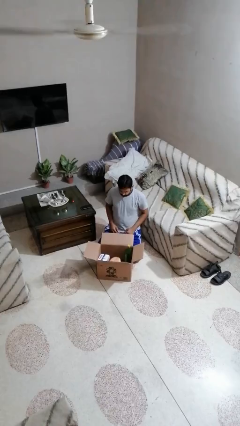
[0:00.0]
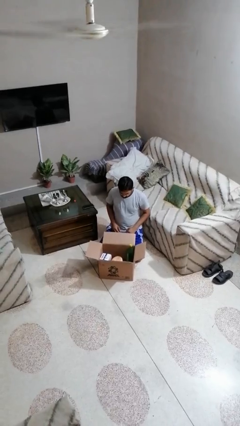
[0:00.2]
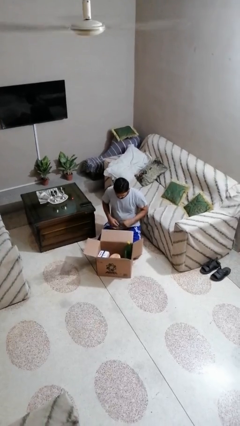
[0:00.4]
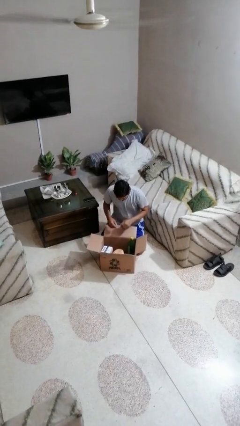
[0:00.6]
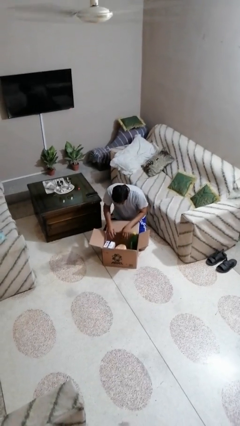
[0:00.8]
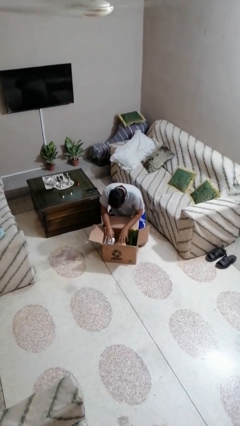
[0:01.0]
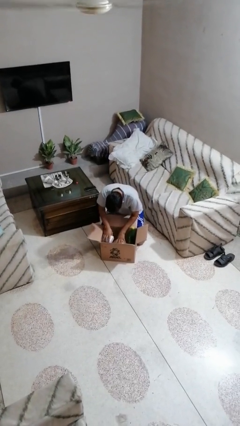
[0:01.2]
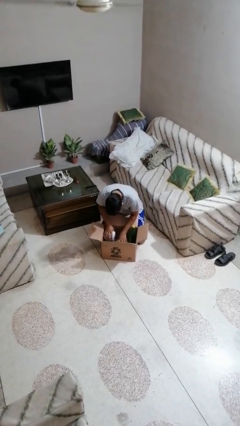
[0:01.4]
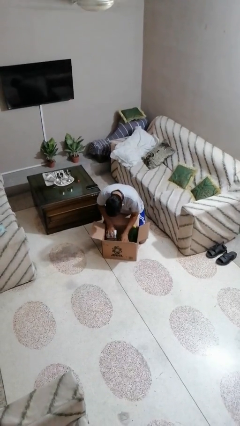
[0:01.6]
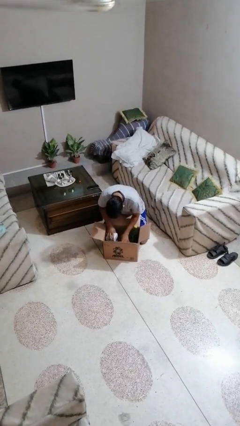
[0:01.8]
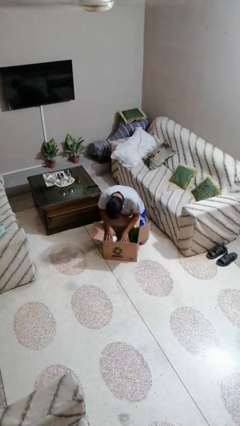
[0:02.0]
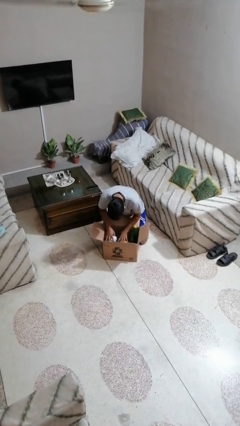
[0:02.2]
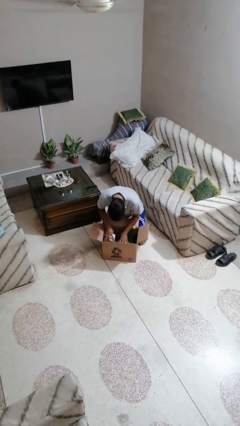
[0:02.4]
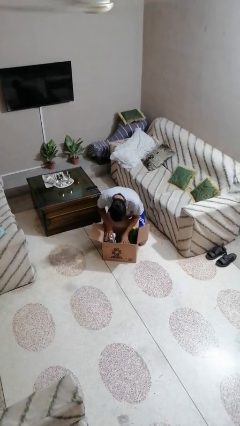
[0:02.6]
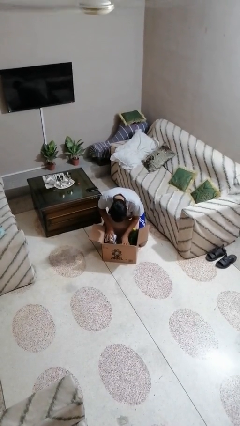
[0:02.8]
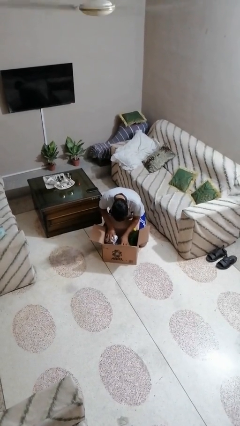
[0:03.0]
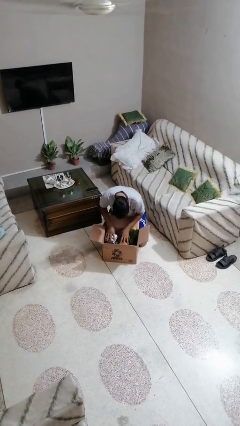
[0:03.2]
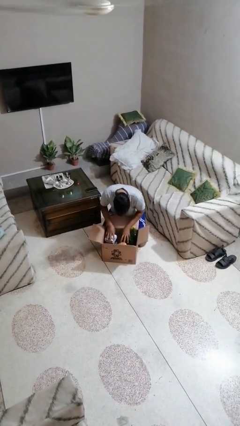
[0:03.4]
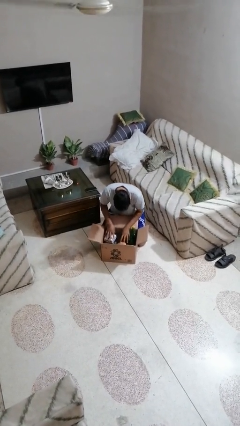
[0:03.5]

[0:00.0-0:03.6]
person searches in box

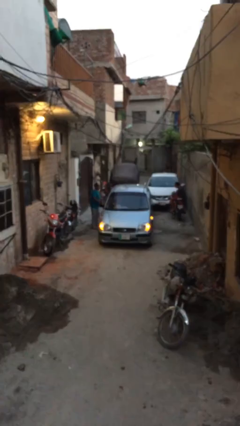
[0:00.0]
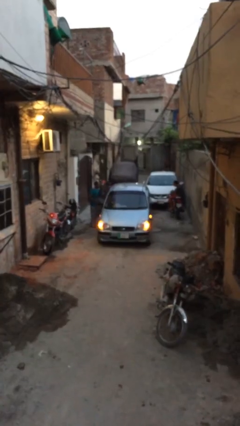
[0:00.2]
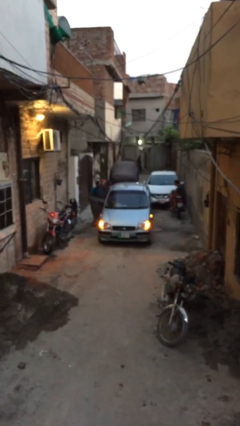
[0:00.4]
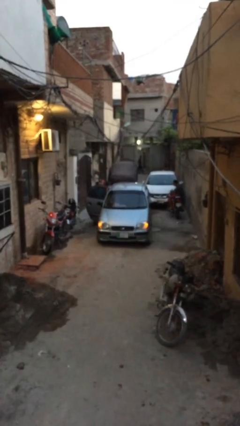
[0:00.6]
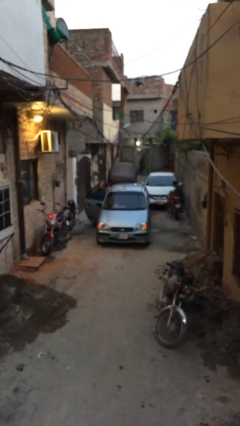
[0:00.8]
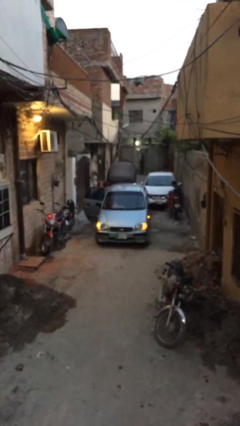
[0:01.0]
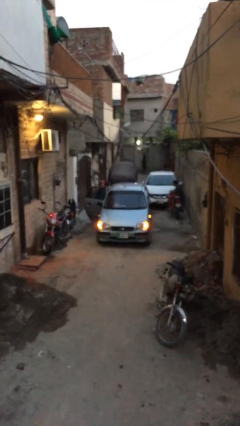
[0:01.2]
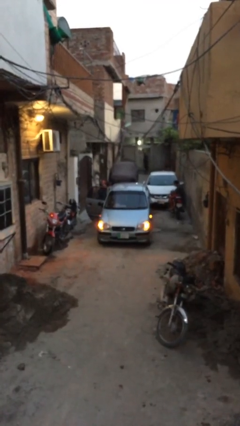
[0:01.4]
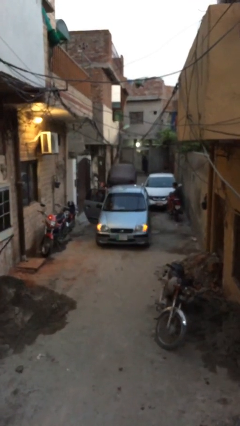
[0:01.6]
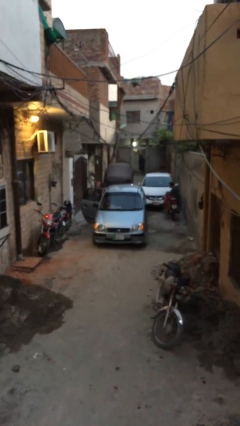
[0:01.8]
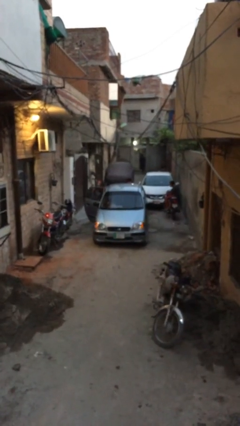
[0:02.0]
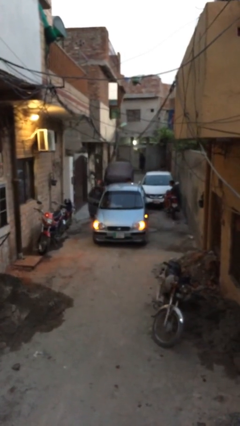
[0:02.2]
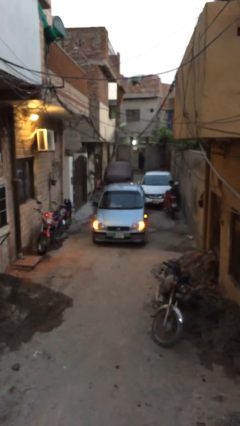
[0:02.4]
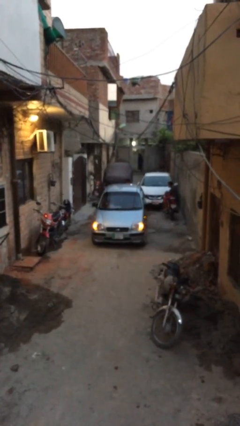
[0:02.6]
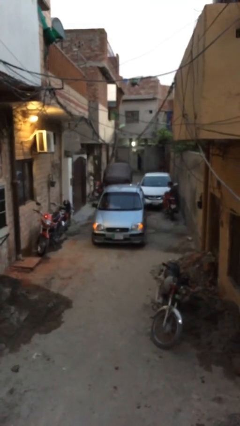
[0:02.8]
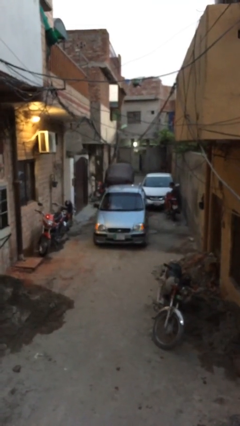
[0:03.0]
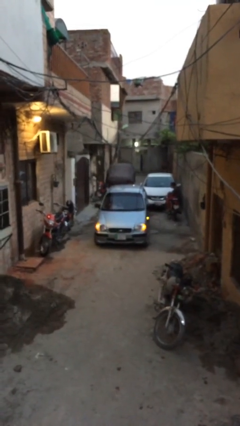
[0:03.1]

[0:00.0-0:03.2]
car picks up person

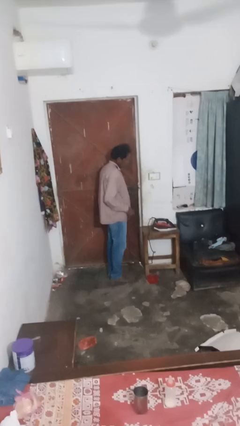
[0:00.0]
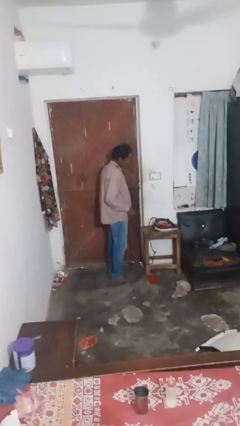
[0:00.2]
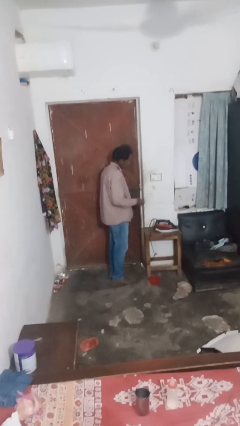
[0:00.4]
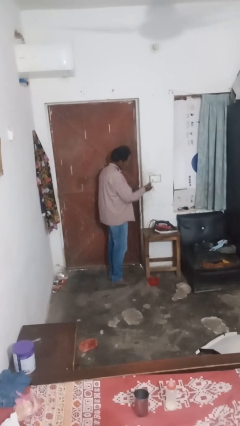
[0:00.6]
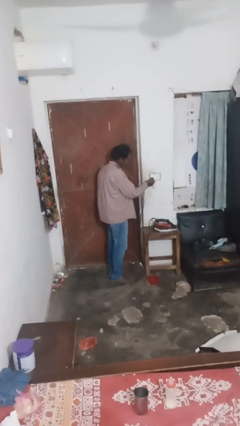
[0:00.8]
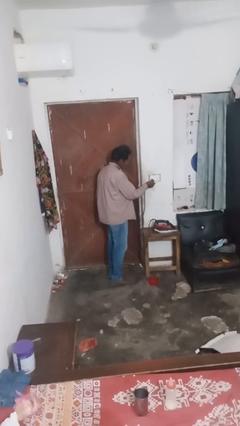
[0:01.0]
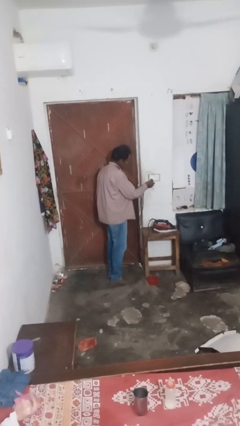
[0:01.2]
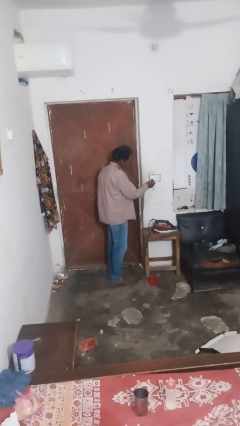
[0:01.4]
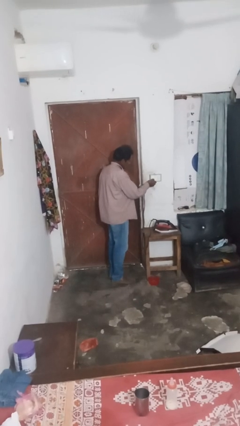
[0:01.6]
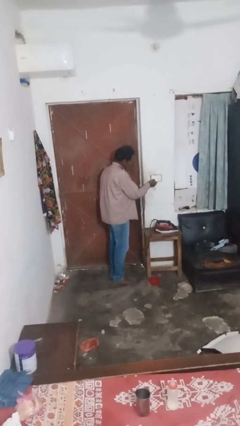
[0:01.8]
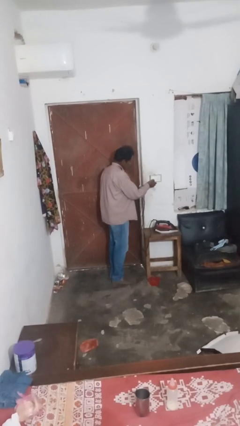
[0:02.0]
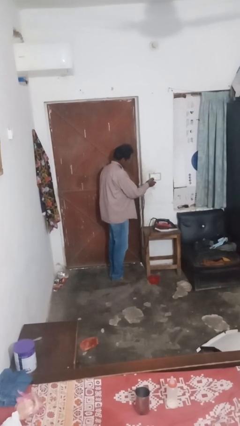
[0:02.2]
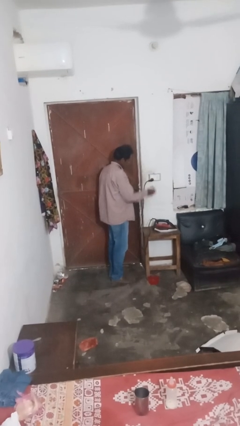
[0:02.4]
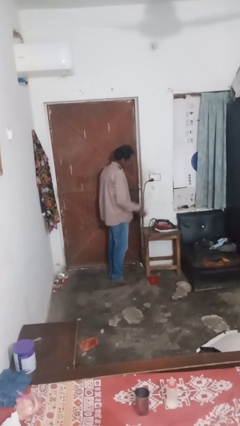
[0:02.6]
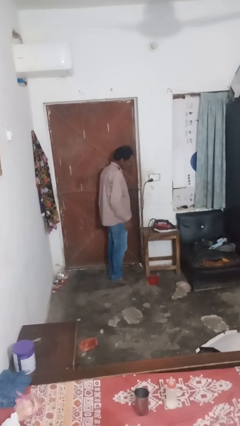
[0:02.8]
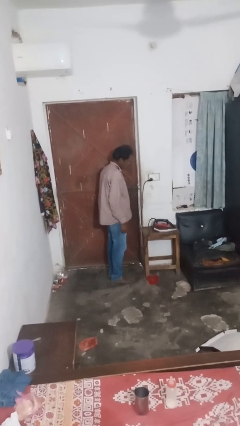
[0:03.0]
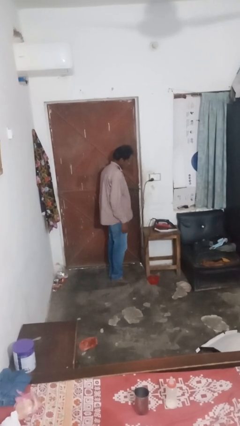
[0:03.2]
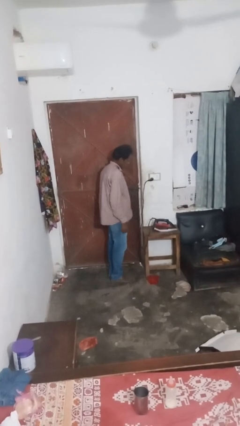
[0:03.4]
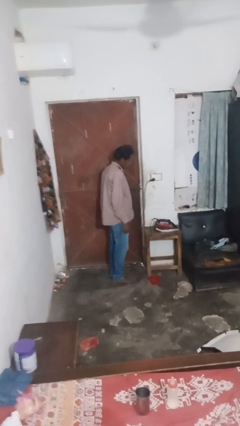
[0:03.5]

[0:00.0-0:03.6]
person plugs into electrical socket

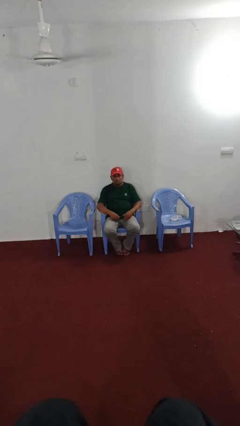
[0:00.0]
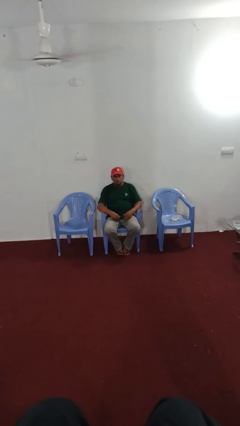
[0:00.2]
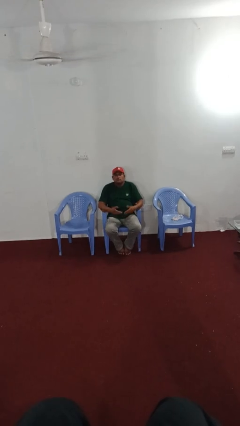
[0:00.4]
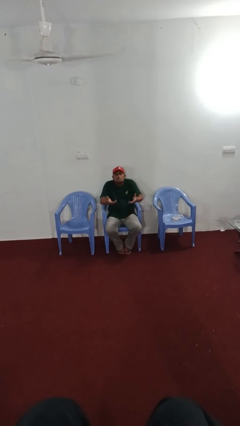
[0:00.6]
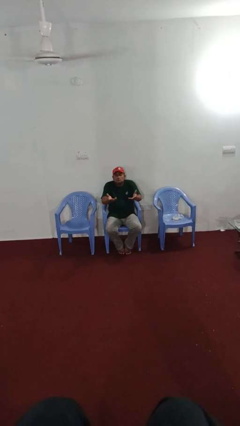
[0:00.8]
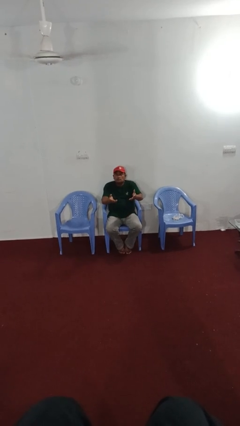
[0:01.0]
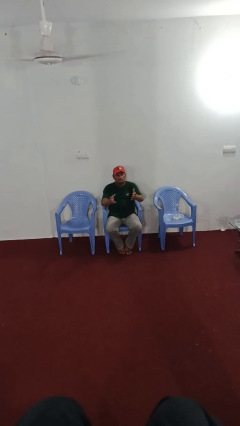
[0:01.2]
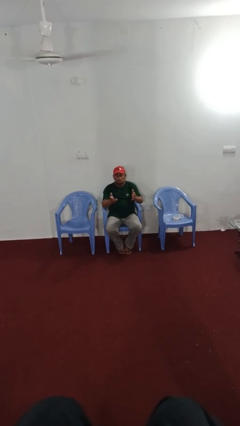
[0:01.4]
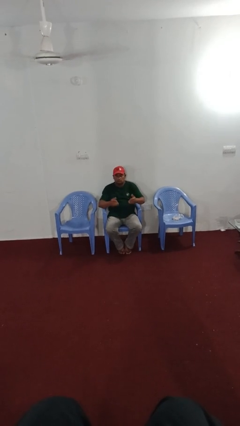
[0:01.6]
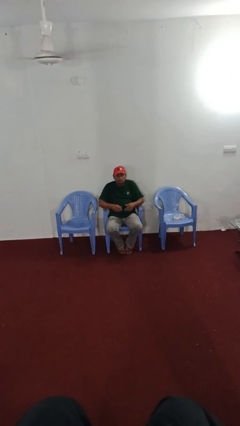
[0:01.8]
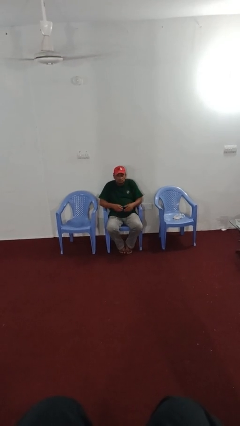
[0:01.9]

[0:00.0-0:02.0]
person shrugs

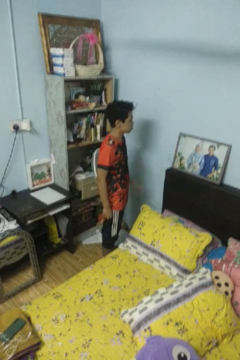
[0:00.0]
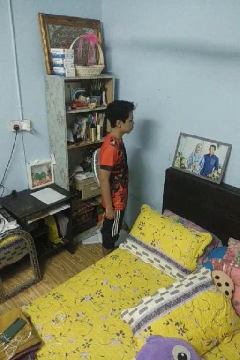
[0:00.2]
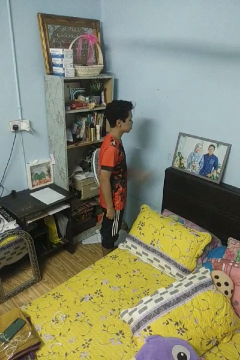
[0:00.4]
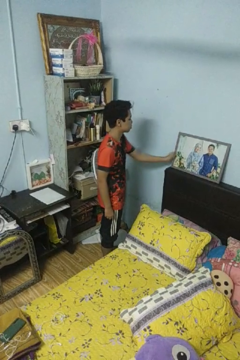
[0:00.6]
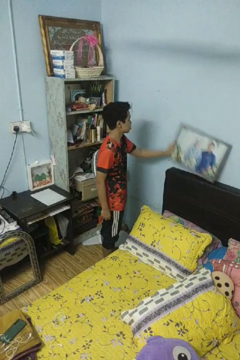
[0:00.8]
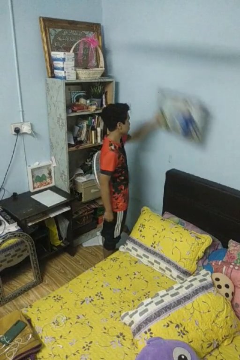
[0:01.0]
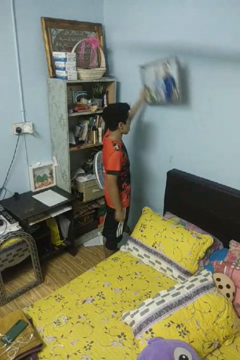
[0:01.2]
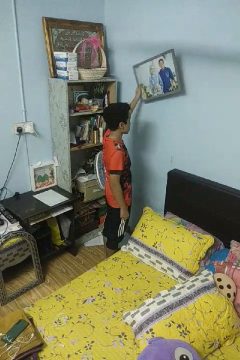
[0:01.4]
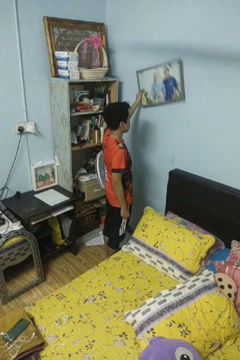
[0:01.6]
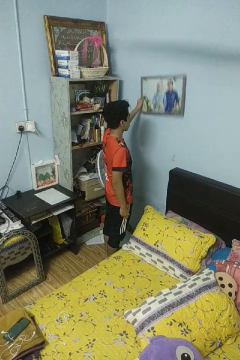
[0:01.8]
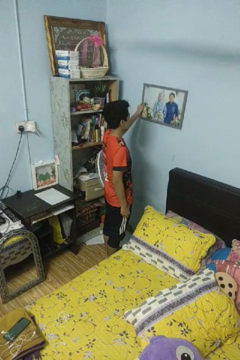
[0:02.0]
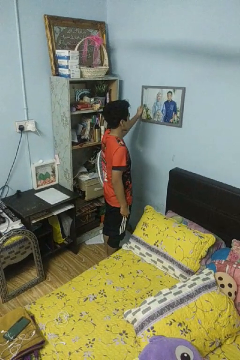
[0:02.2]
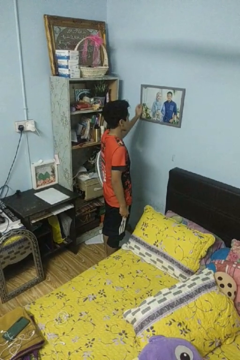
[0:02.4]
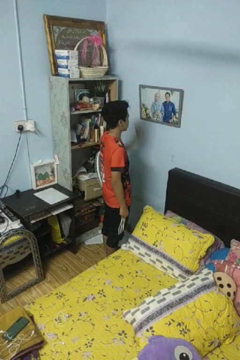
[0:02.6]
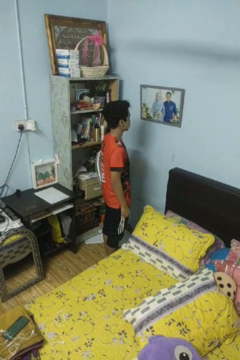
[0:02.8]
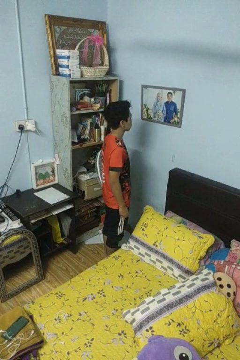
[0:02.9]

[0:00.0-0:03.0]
person puts up picture frame

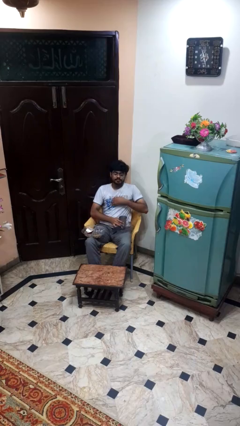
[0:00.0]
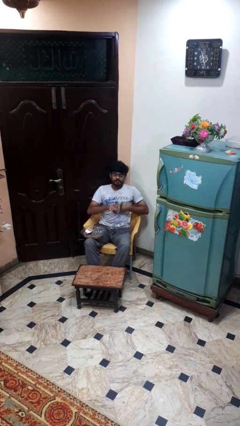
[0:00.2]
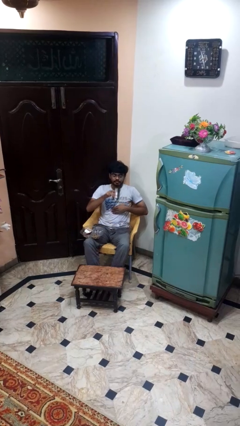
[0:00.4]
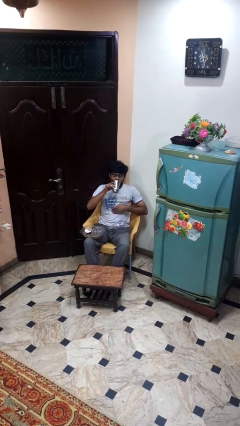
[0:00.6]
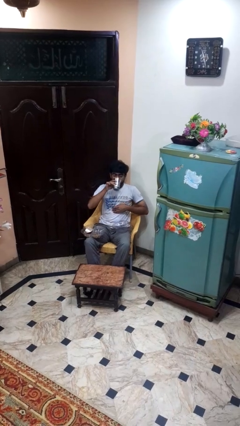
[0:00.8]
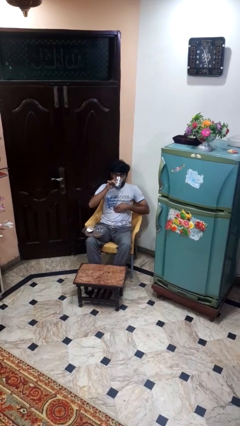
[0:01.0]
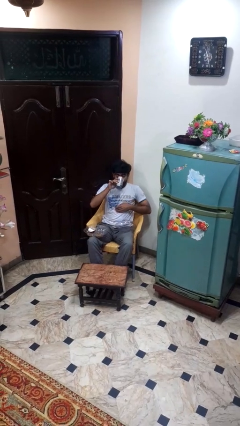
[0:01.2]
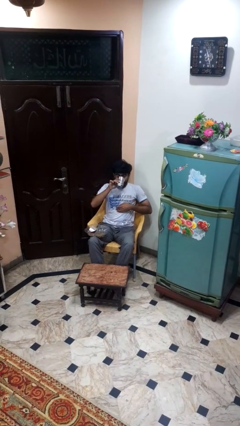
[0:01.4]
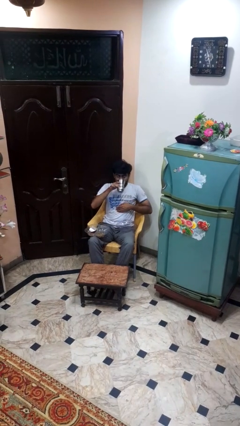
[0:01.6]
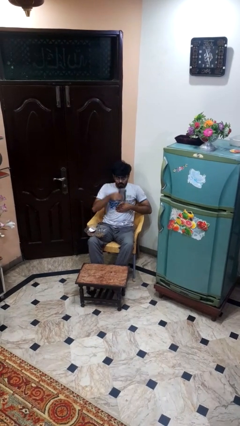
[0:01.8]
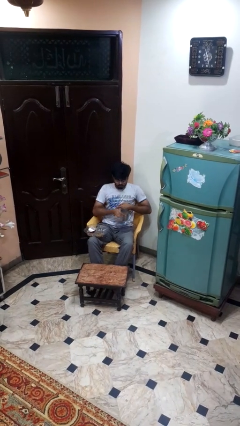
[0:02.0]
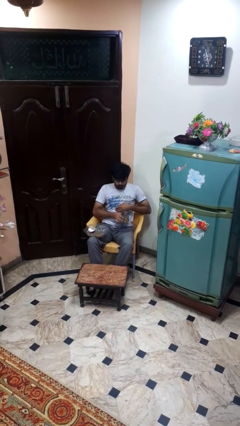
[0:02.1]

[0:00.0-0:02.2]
person drinks from cup

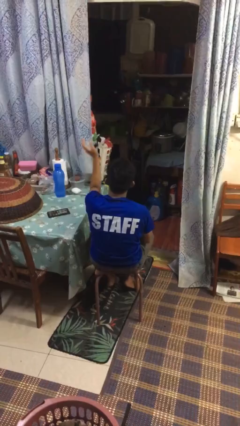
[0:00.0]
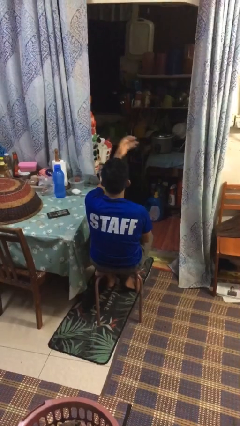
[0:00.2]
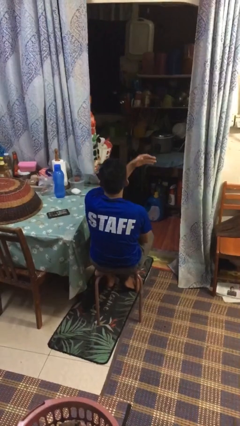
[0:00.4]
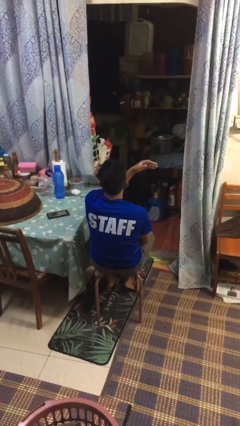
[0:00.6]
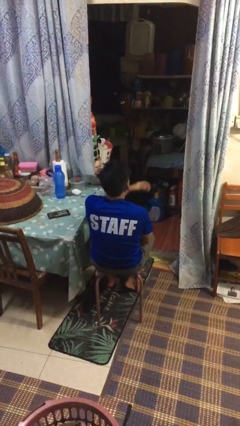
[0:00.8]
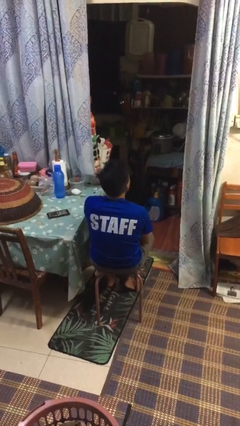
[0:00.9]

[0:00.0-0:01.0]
person gestures swipe right
